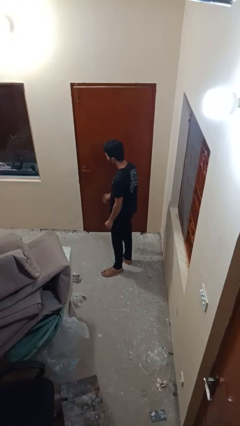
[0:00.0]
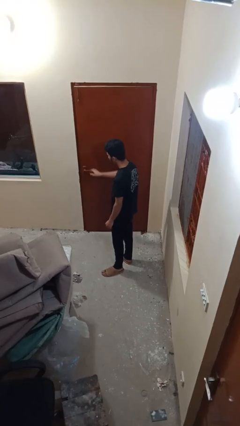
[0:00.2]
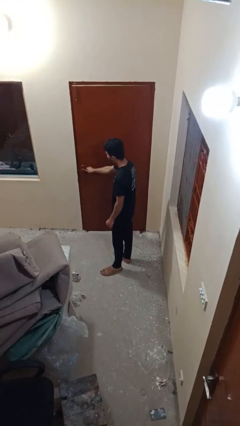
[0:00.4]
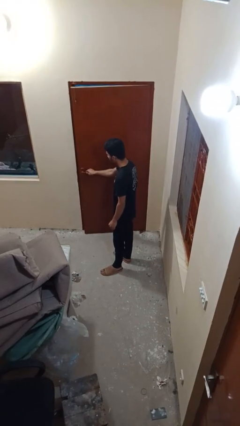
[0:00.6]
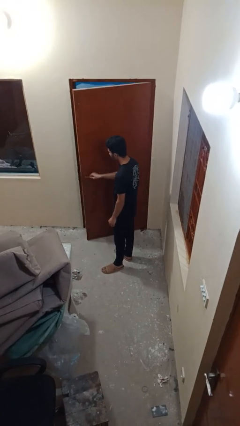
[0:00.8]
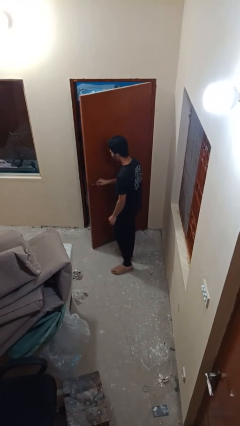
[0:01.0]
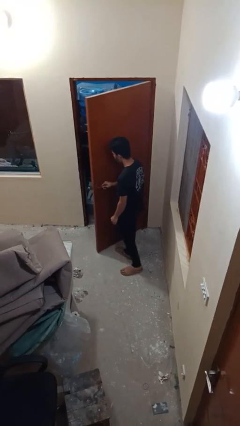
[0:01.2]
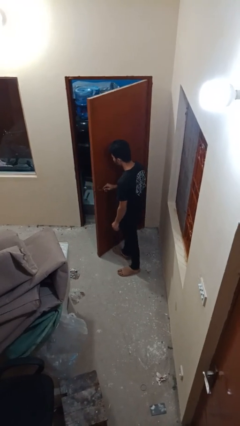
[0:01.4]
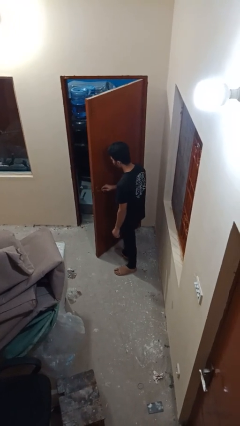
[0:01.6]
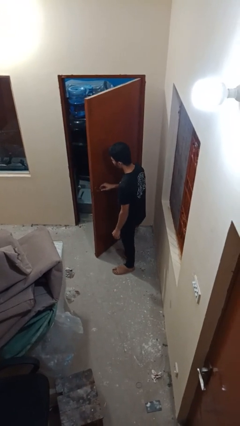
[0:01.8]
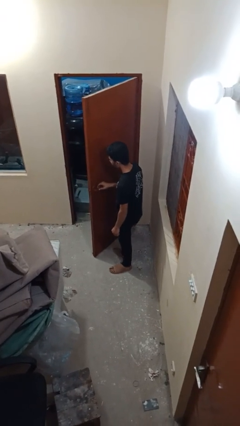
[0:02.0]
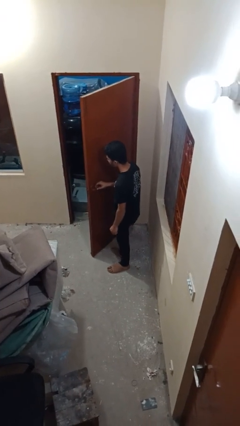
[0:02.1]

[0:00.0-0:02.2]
person opens facility door

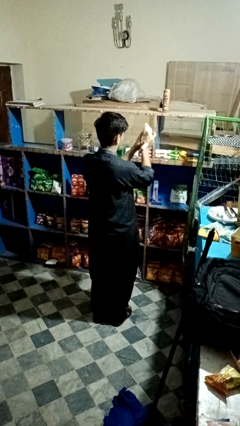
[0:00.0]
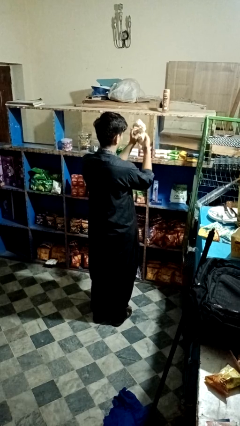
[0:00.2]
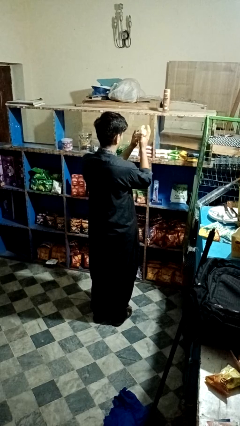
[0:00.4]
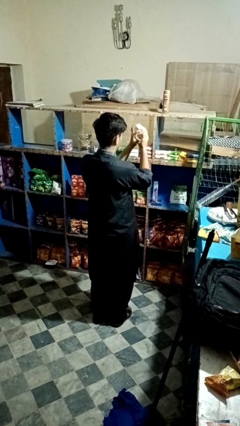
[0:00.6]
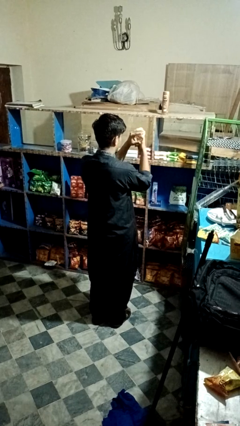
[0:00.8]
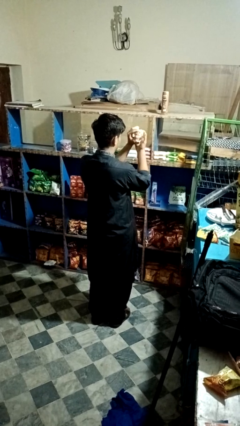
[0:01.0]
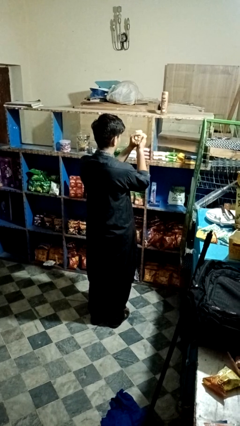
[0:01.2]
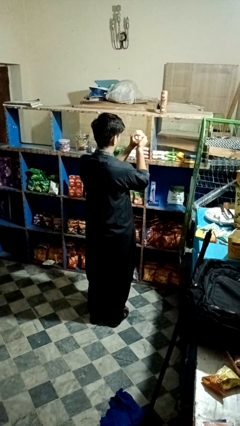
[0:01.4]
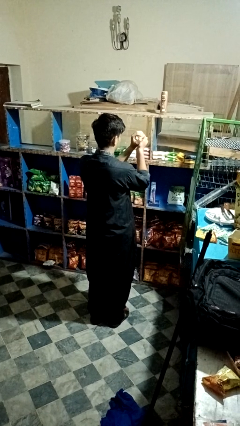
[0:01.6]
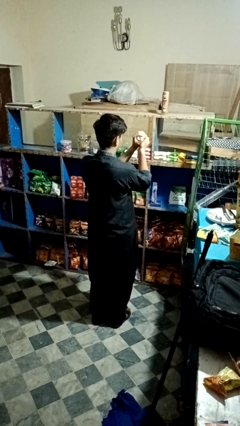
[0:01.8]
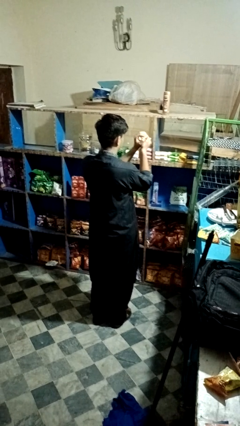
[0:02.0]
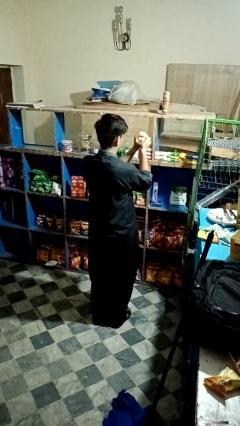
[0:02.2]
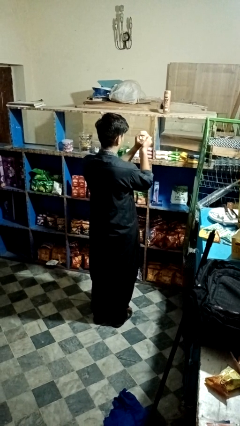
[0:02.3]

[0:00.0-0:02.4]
person crumples paper

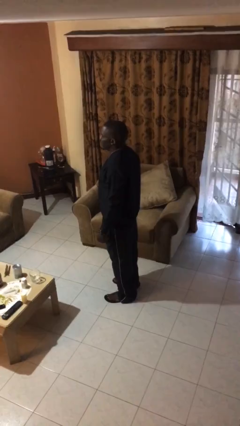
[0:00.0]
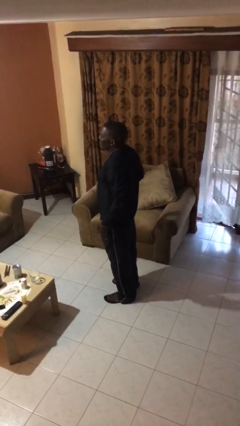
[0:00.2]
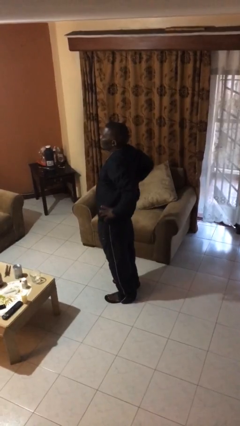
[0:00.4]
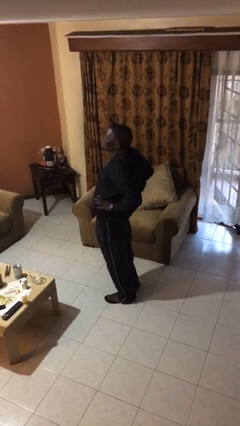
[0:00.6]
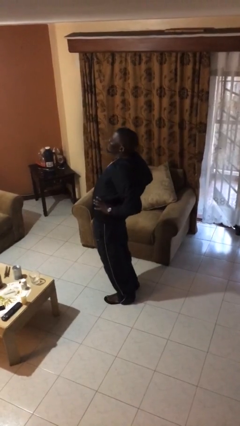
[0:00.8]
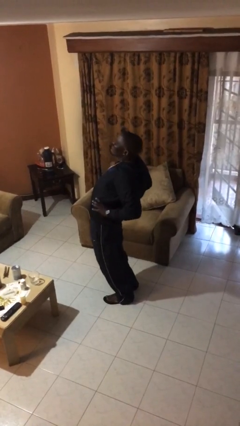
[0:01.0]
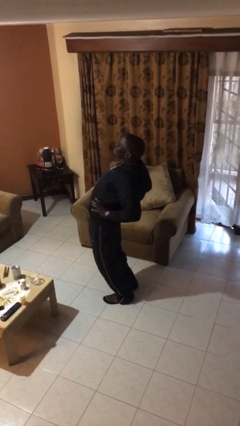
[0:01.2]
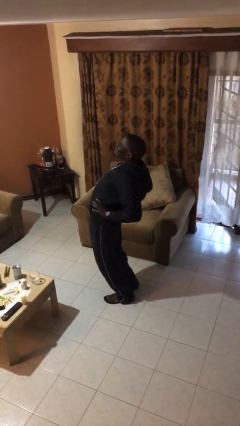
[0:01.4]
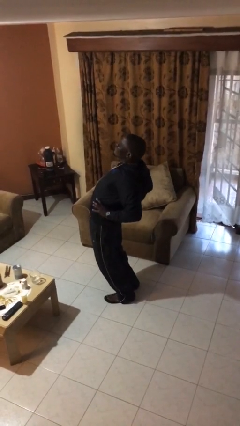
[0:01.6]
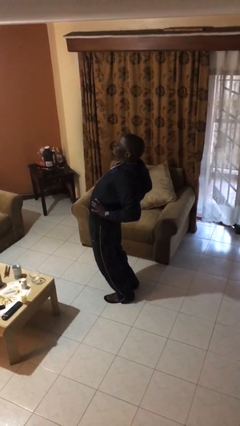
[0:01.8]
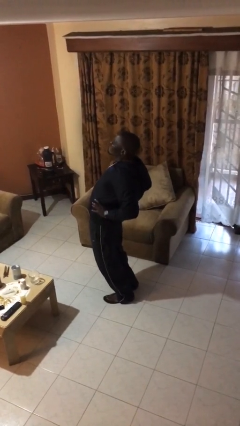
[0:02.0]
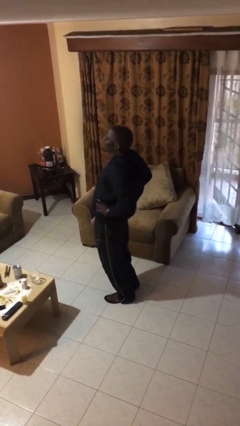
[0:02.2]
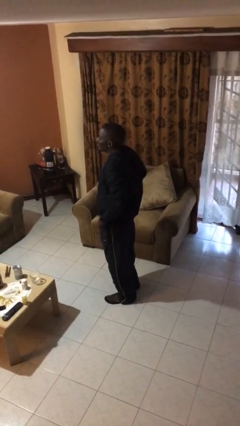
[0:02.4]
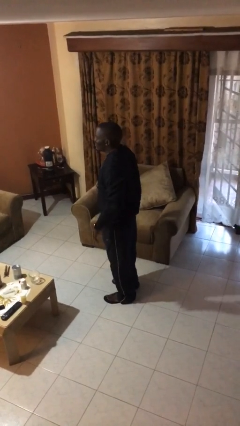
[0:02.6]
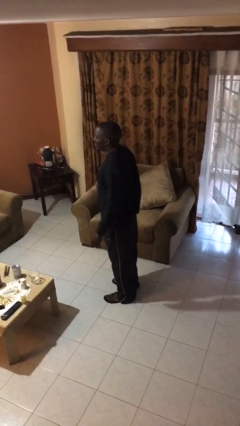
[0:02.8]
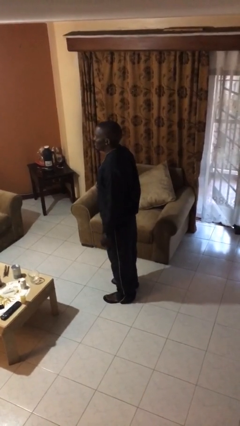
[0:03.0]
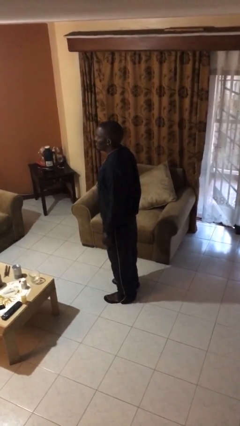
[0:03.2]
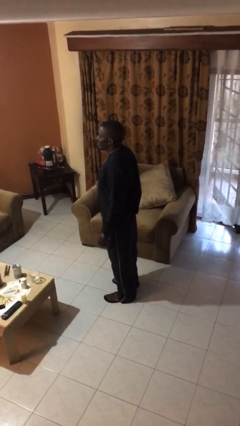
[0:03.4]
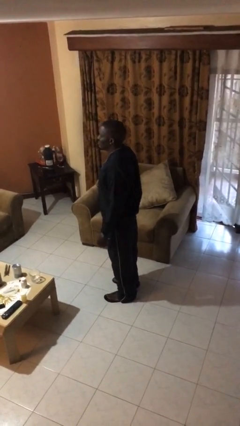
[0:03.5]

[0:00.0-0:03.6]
person stretches back

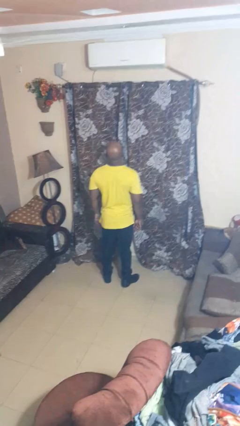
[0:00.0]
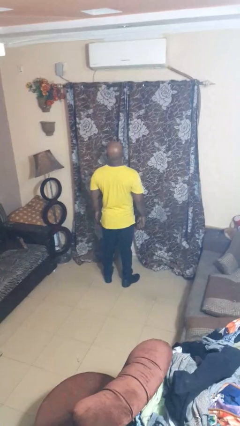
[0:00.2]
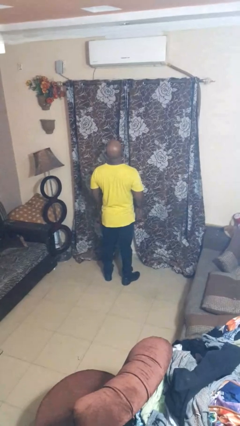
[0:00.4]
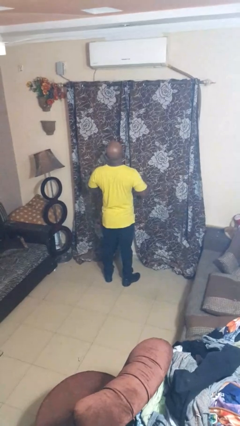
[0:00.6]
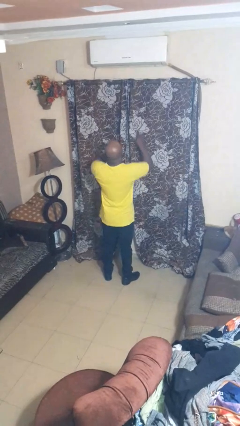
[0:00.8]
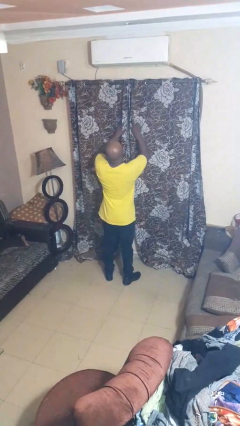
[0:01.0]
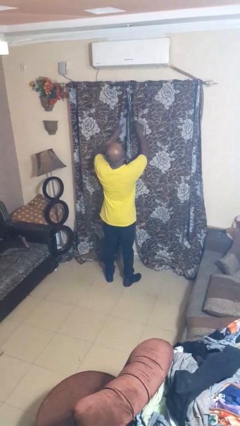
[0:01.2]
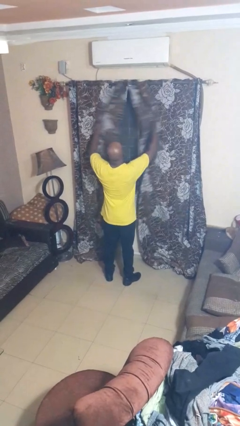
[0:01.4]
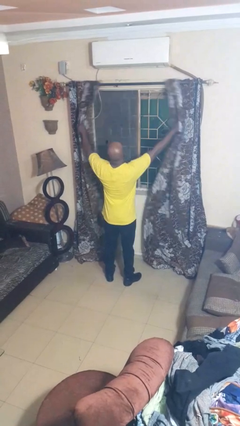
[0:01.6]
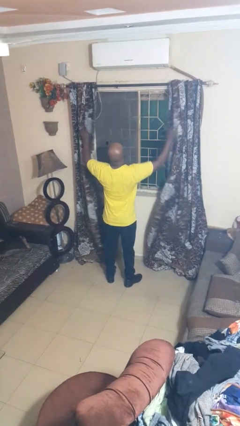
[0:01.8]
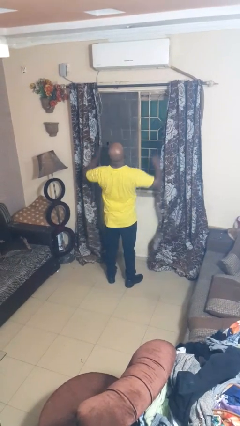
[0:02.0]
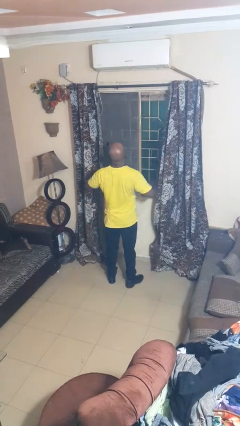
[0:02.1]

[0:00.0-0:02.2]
person opens curtains

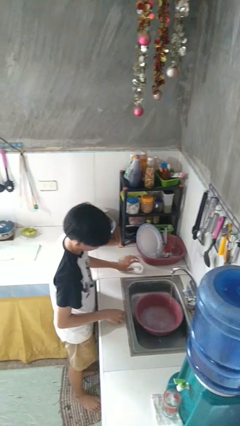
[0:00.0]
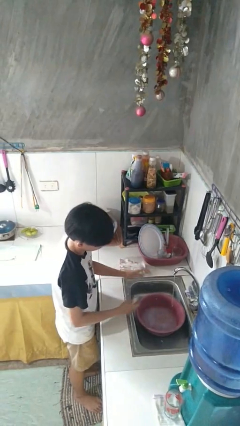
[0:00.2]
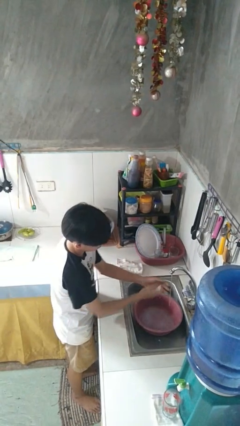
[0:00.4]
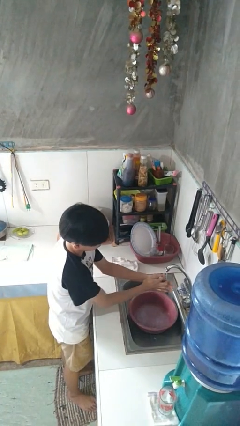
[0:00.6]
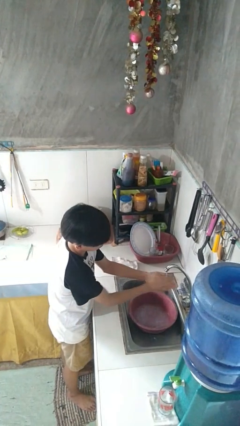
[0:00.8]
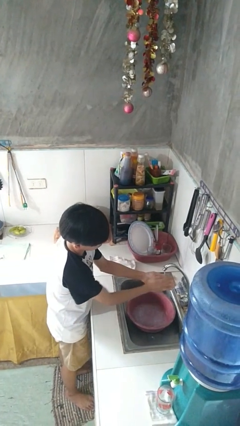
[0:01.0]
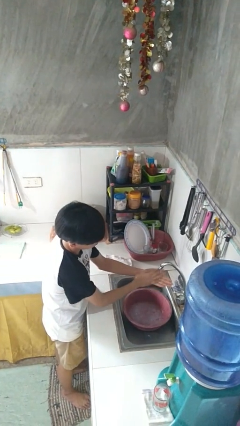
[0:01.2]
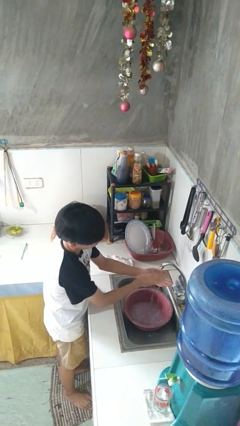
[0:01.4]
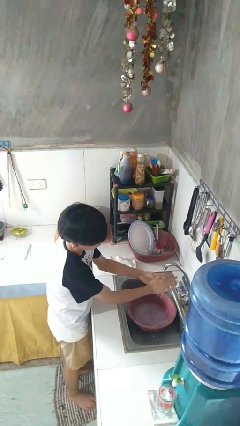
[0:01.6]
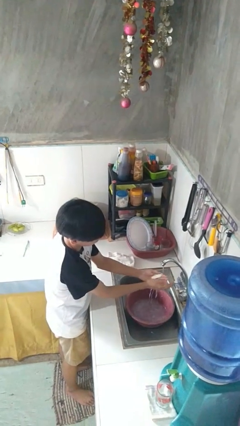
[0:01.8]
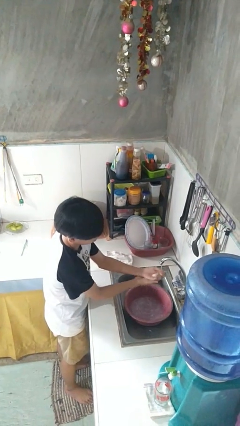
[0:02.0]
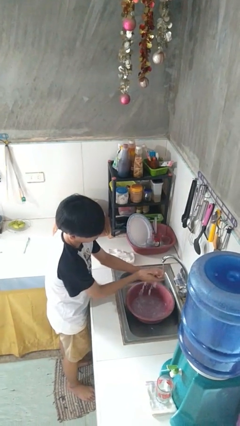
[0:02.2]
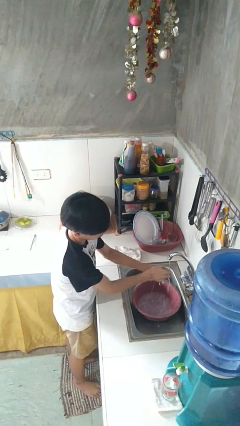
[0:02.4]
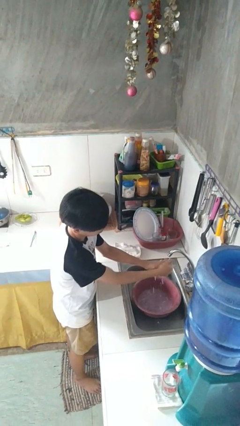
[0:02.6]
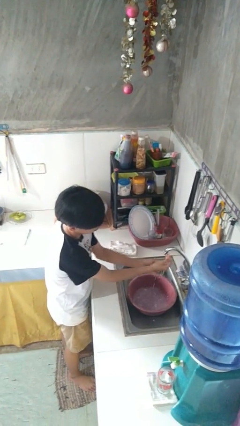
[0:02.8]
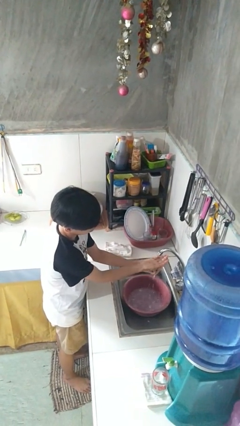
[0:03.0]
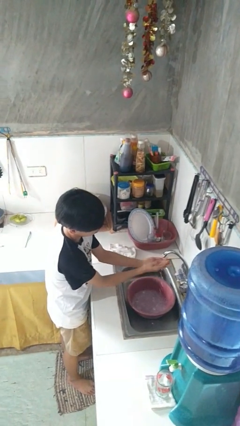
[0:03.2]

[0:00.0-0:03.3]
person washes hands

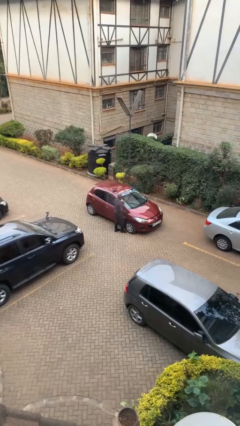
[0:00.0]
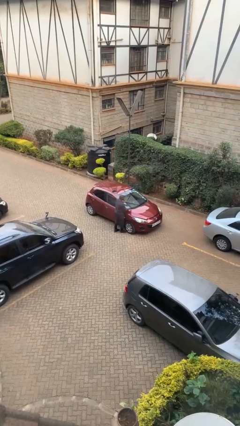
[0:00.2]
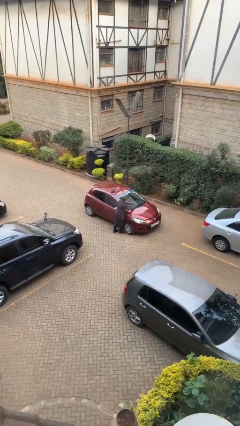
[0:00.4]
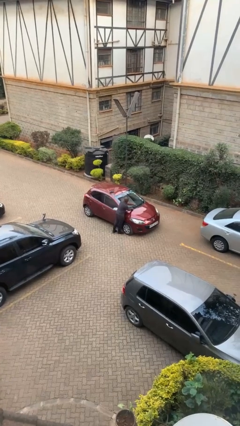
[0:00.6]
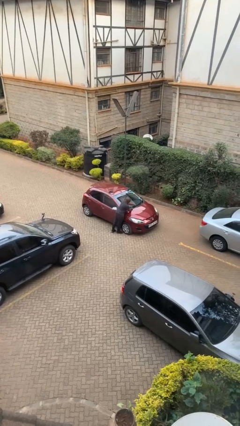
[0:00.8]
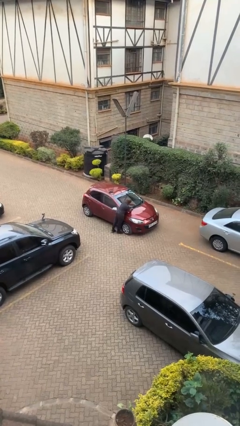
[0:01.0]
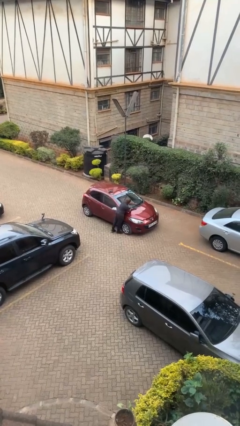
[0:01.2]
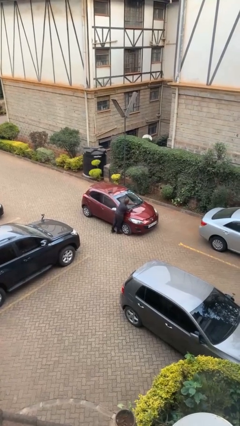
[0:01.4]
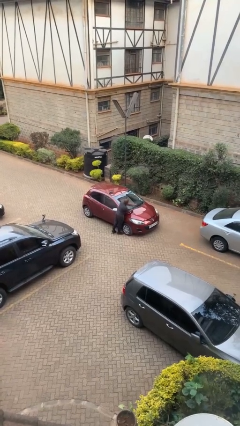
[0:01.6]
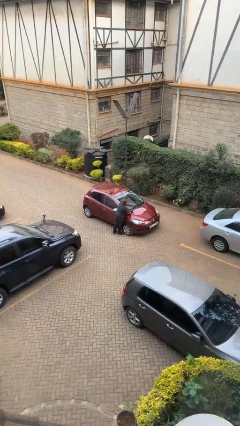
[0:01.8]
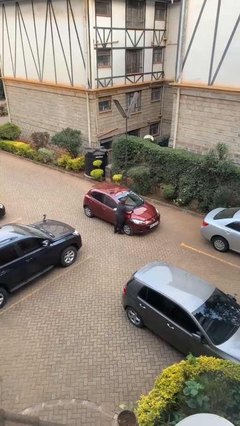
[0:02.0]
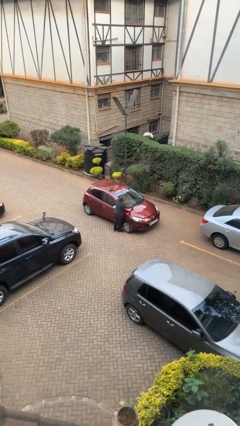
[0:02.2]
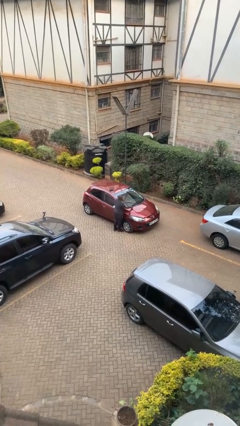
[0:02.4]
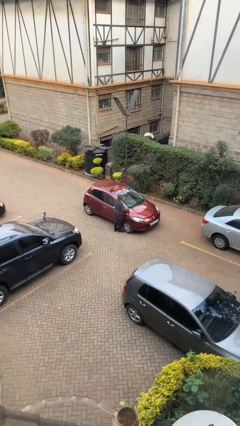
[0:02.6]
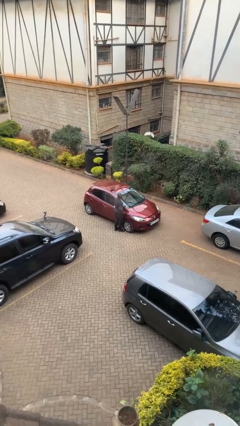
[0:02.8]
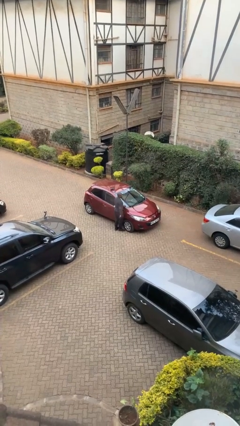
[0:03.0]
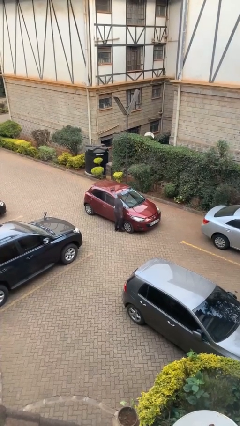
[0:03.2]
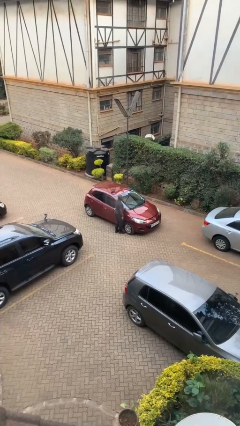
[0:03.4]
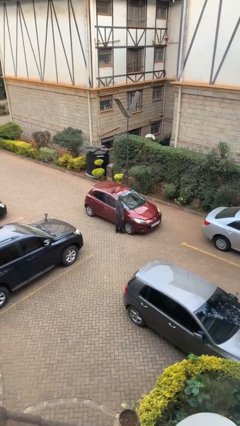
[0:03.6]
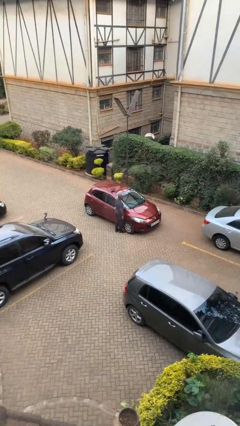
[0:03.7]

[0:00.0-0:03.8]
person flips up car wipers
